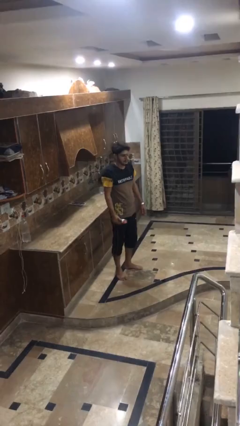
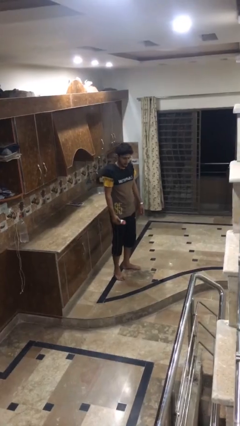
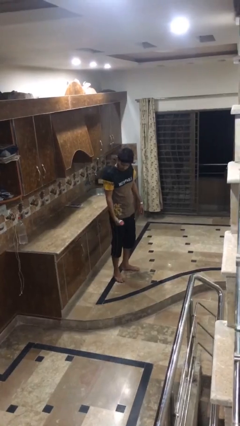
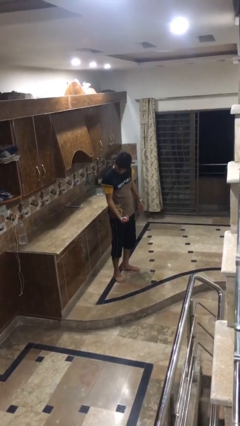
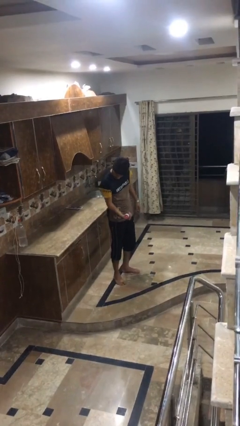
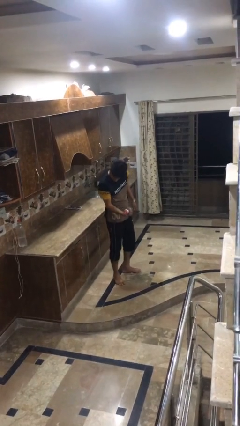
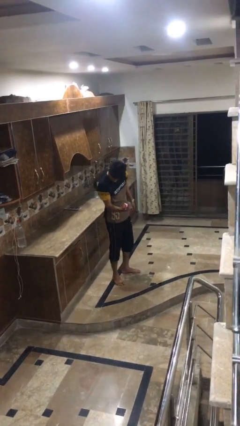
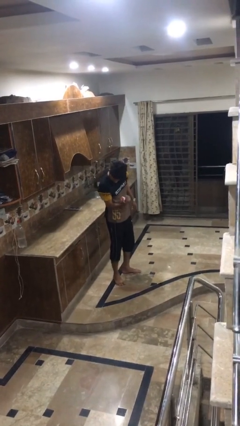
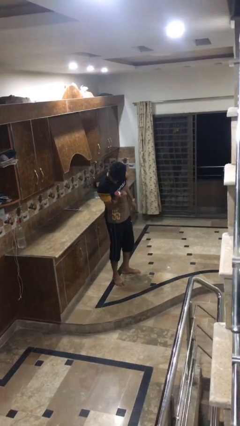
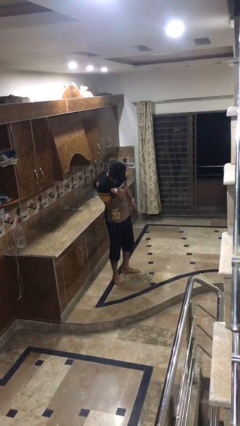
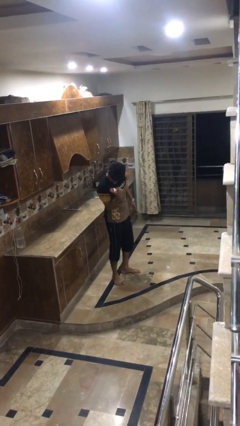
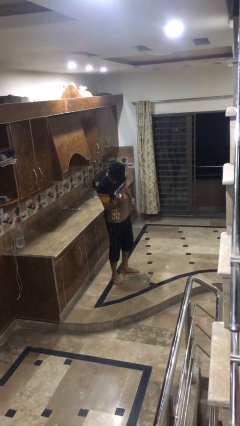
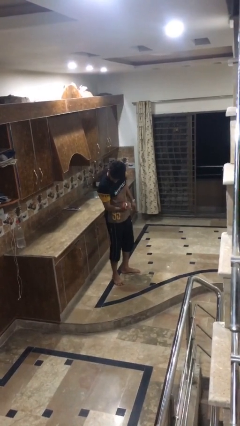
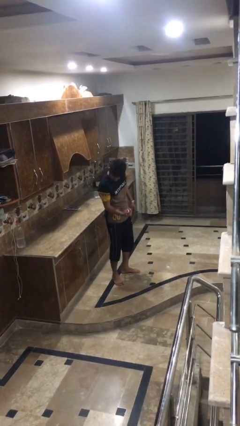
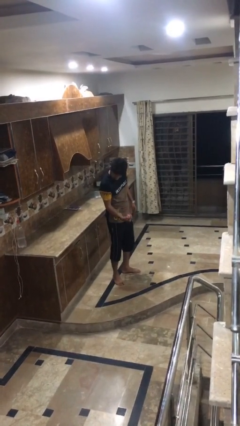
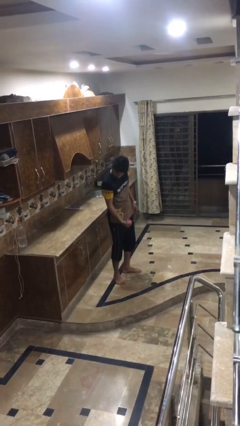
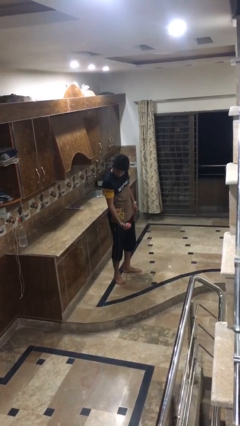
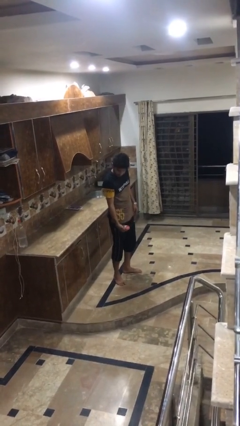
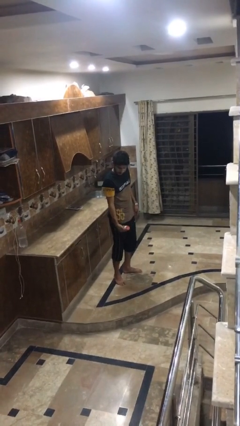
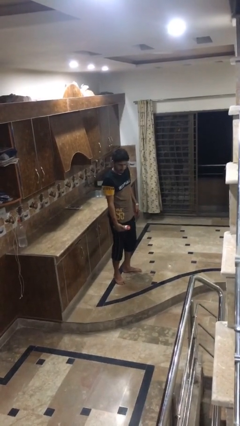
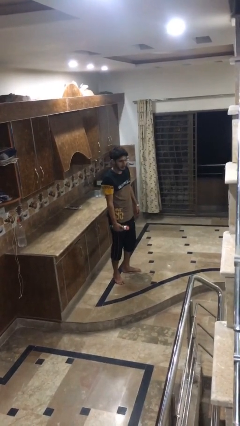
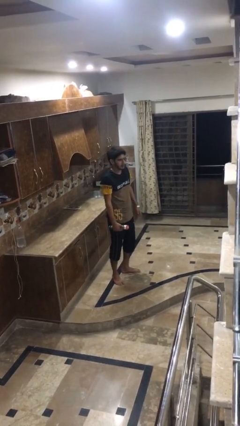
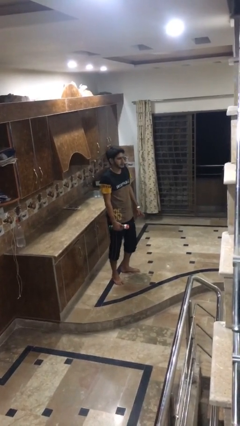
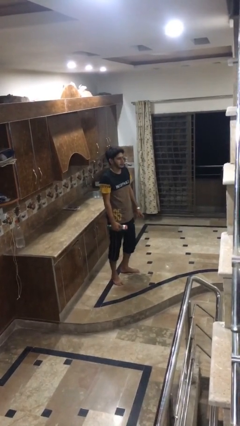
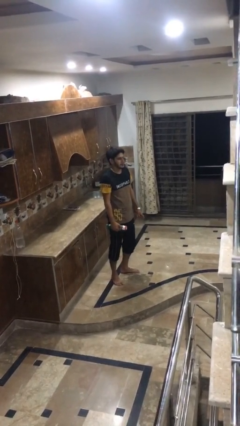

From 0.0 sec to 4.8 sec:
person lifts dumbbells

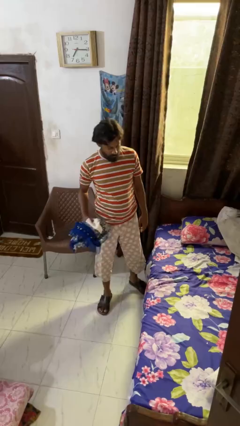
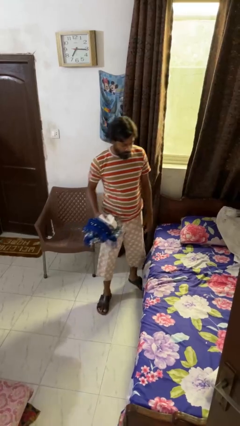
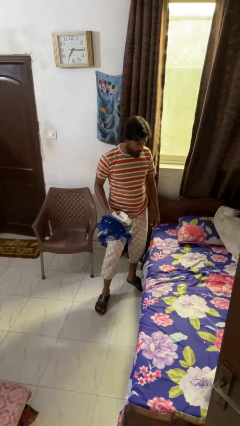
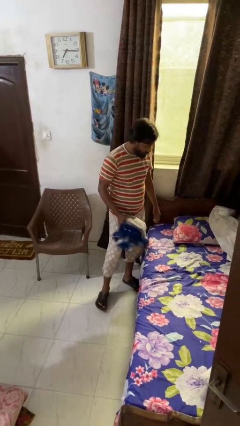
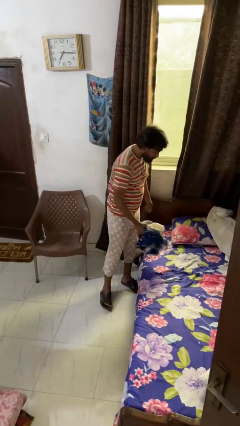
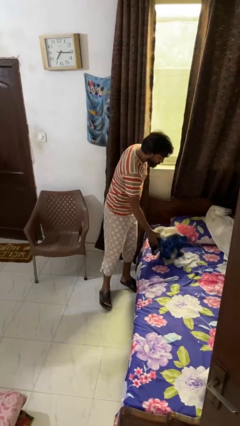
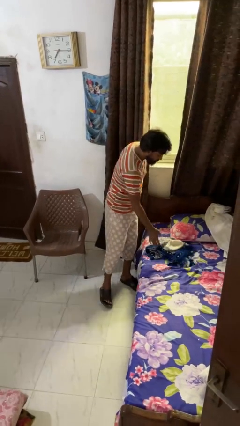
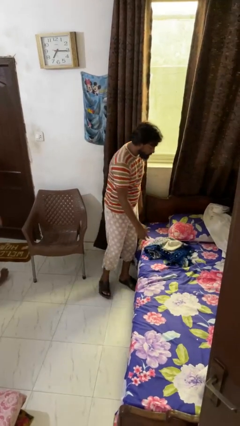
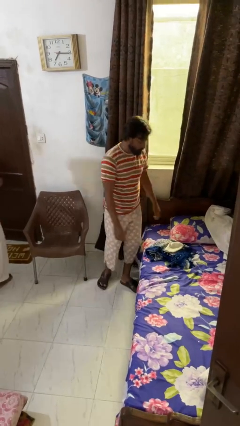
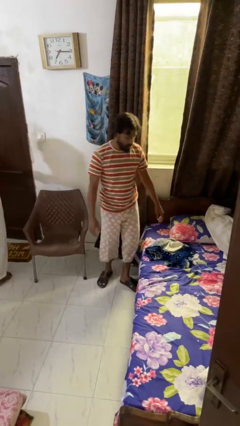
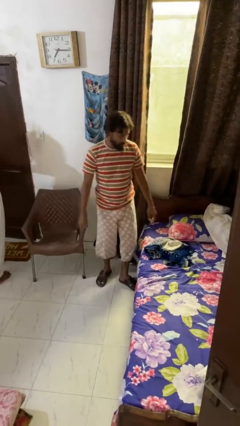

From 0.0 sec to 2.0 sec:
person puts down object on bed

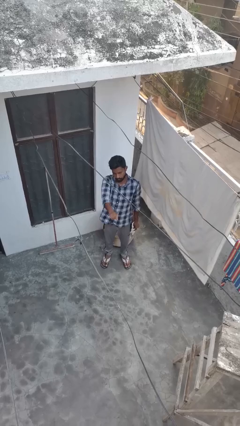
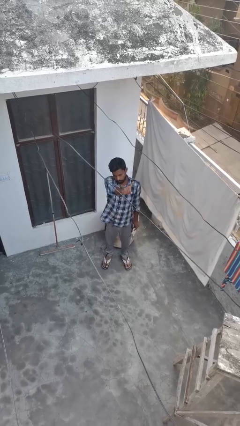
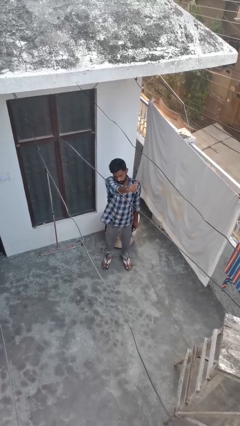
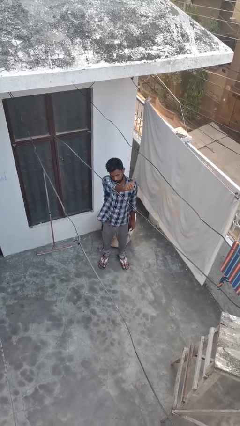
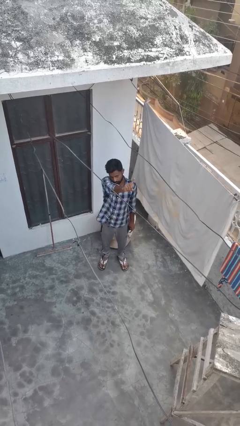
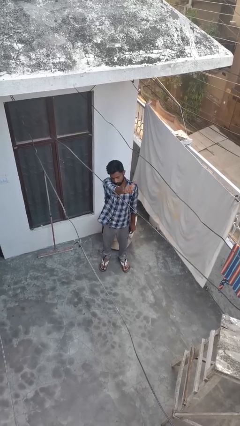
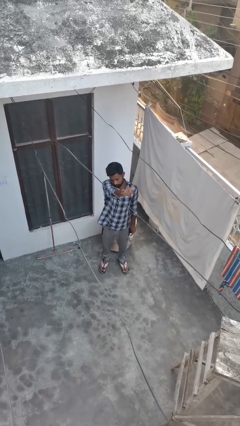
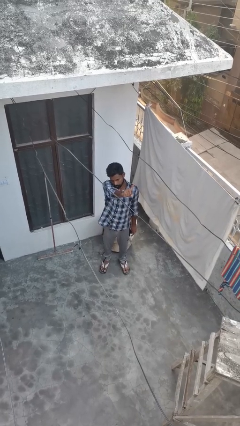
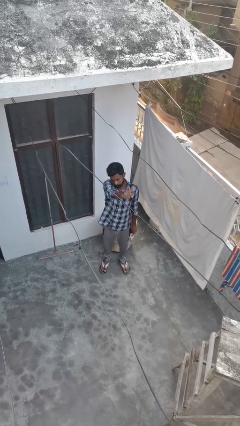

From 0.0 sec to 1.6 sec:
person gestures number one

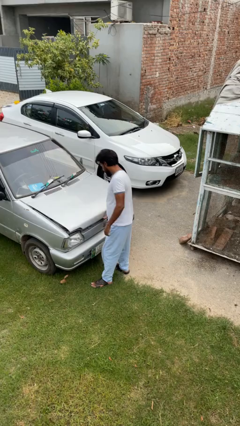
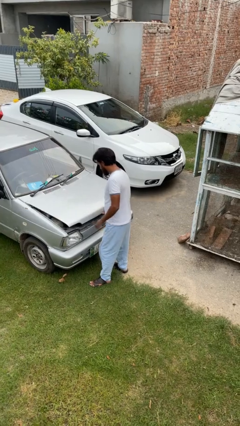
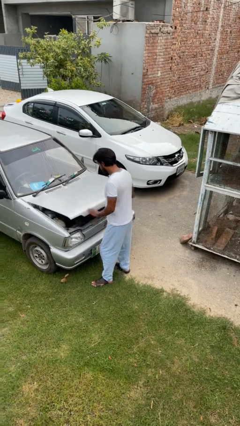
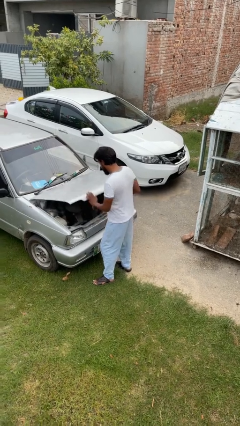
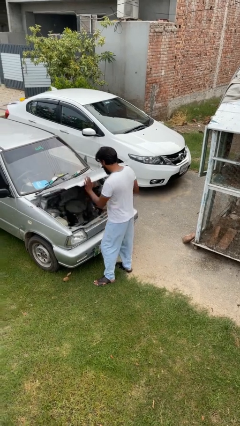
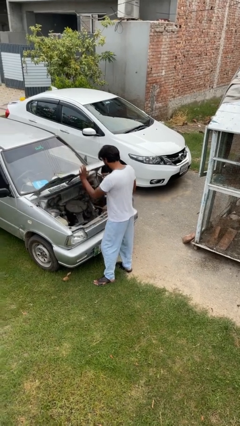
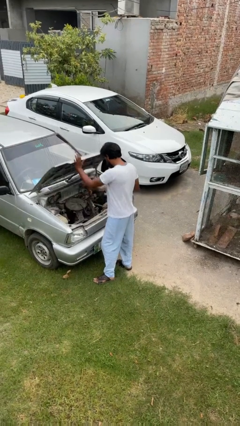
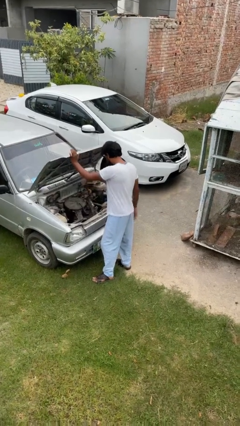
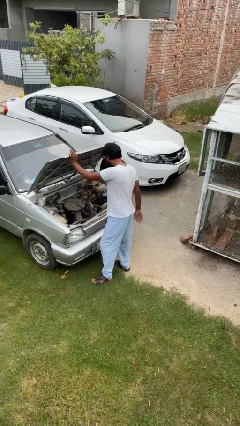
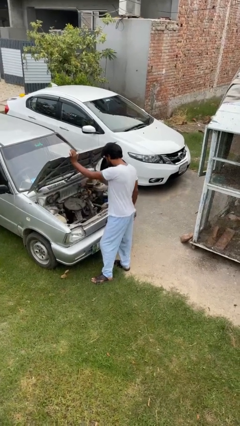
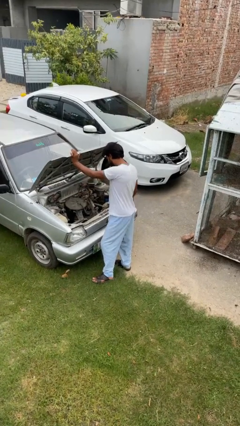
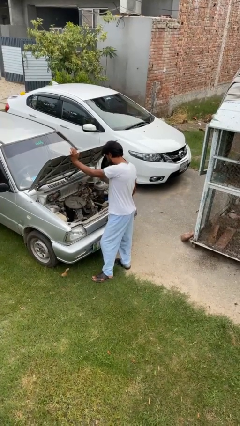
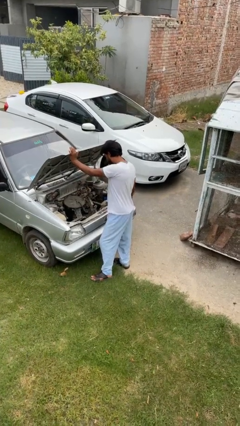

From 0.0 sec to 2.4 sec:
person opens car hood

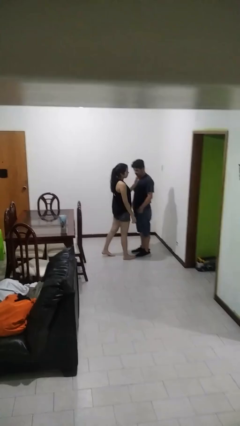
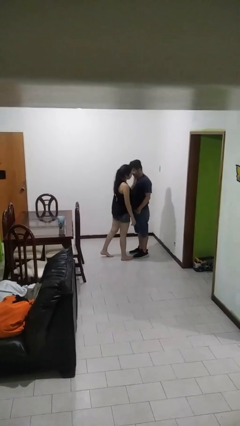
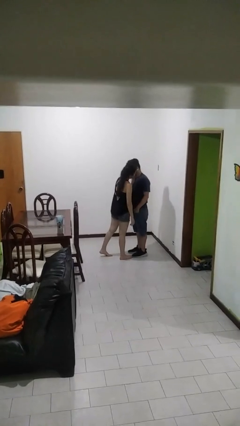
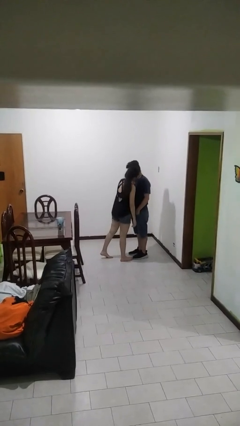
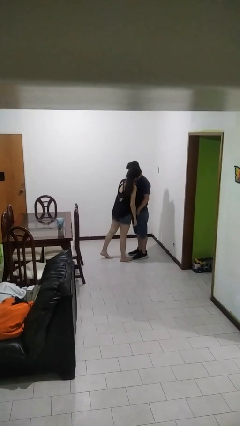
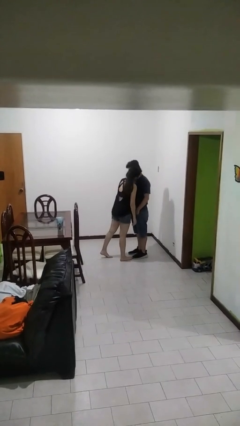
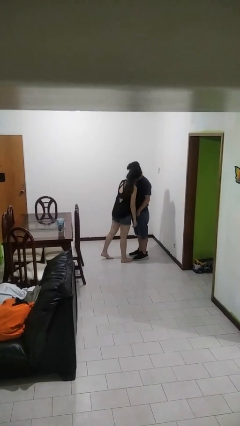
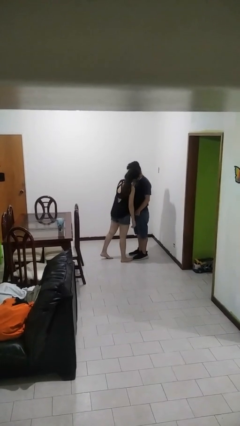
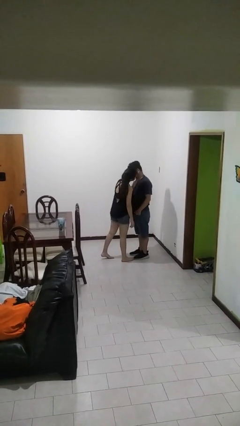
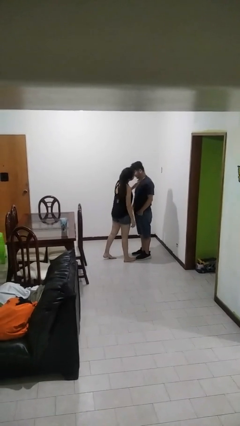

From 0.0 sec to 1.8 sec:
person kisses cheek of person

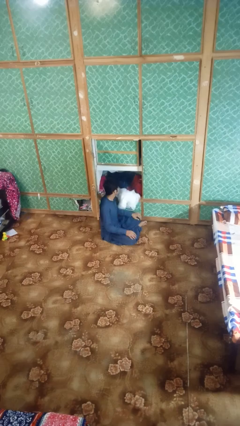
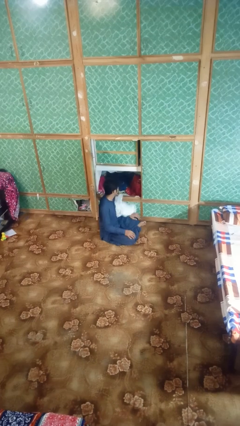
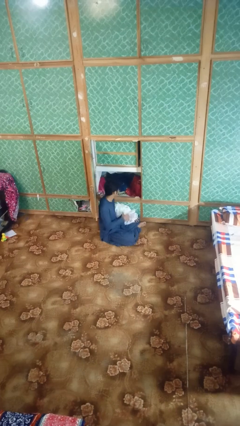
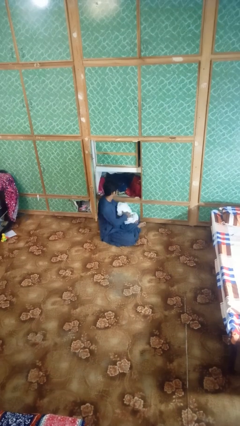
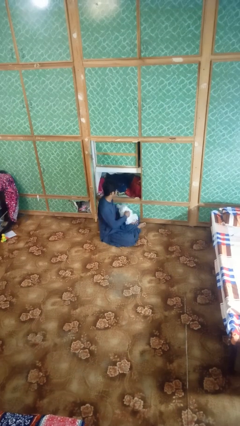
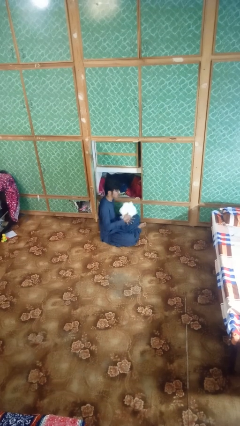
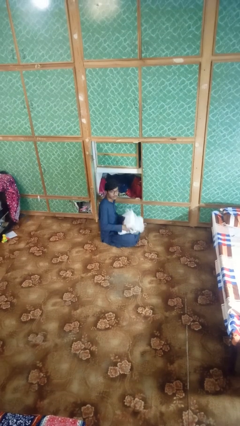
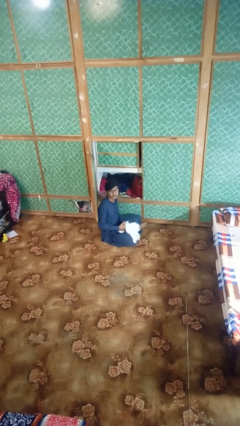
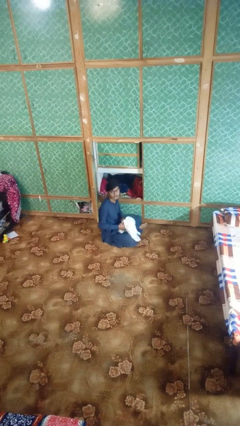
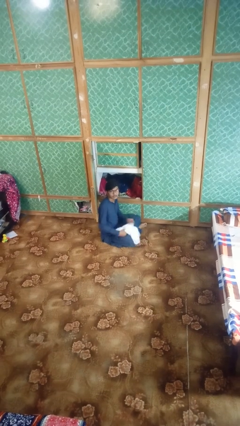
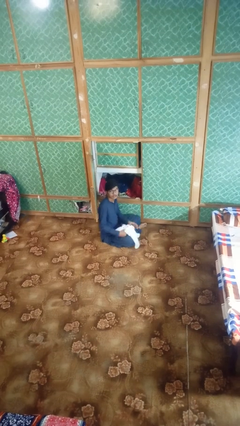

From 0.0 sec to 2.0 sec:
person takes clothes from dresser

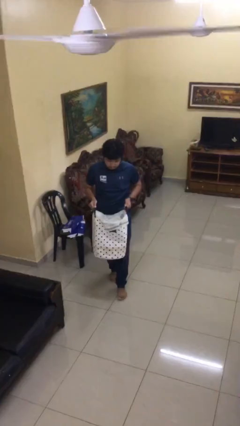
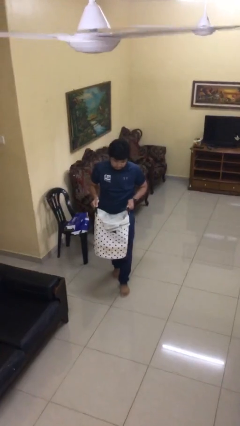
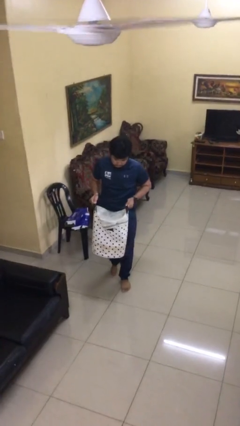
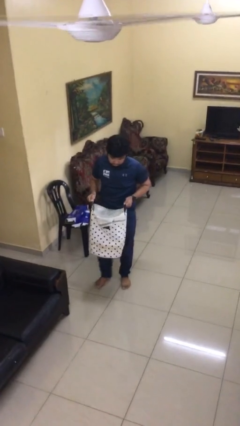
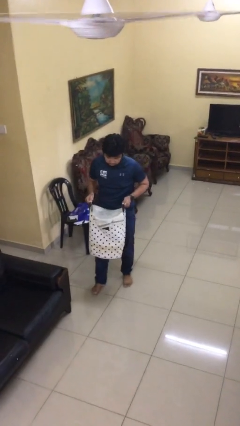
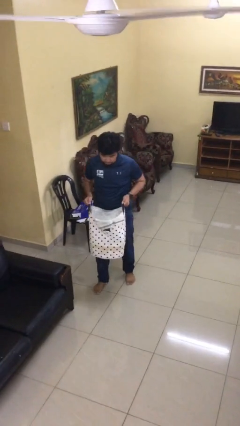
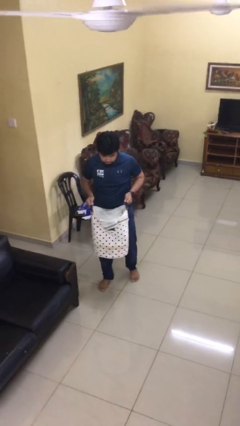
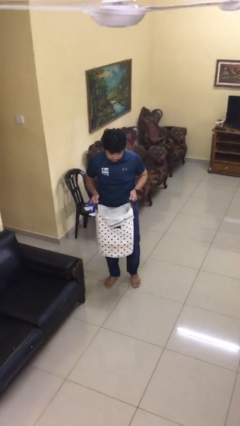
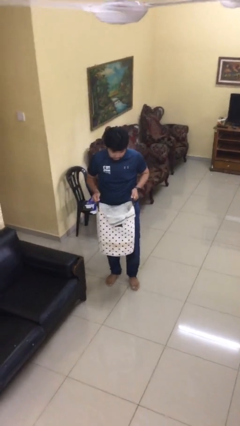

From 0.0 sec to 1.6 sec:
person carries laundry basket
